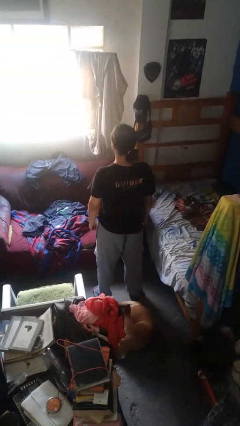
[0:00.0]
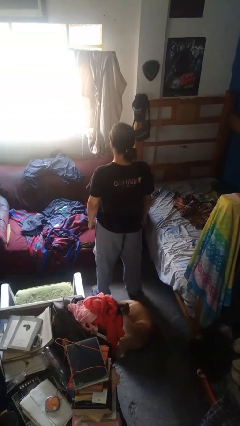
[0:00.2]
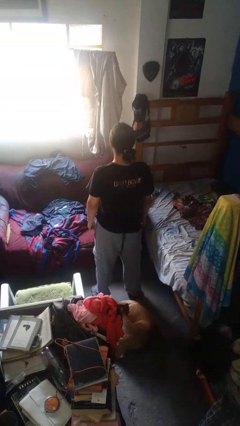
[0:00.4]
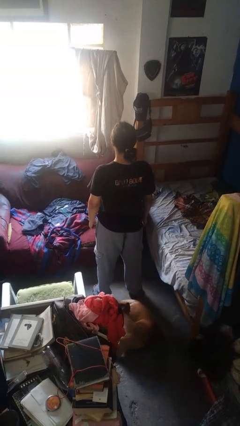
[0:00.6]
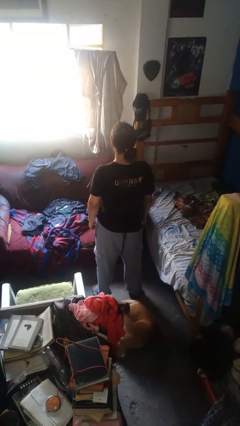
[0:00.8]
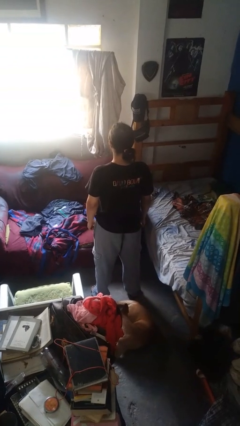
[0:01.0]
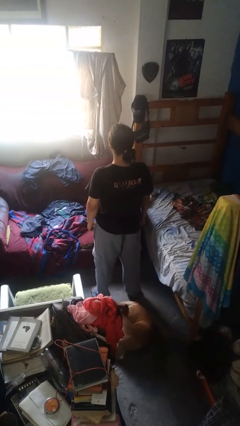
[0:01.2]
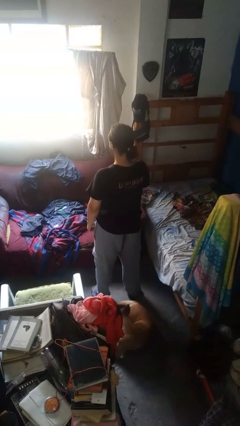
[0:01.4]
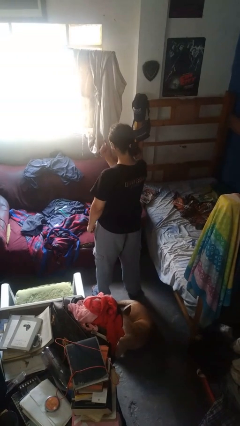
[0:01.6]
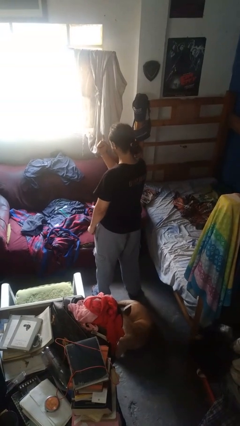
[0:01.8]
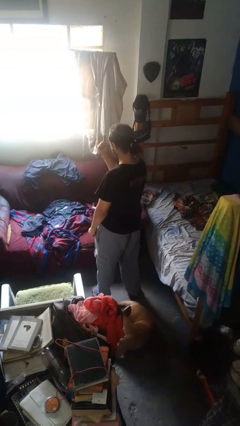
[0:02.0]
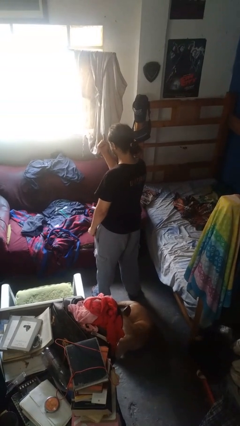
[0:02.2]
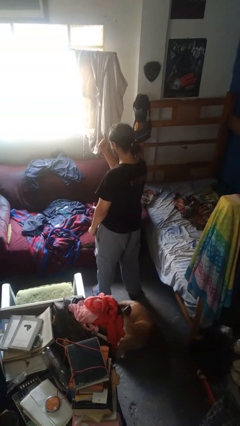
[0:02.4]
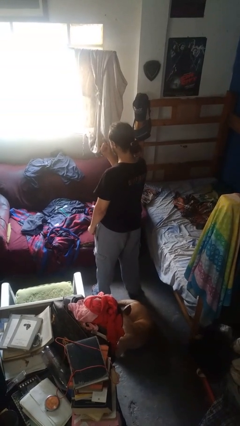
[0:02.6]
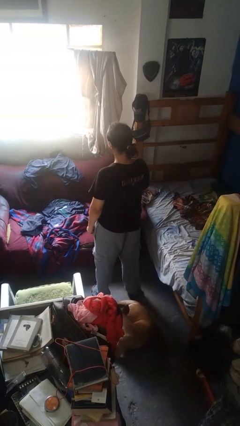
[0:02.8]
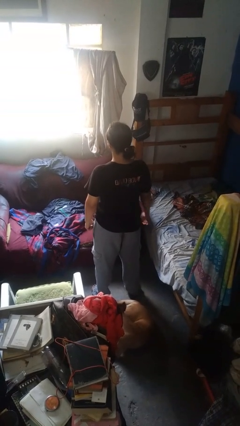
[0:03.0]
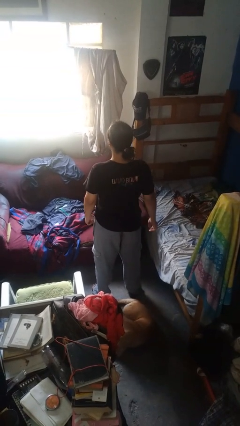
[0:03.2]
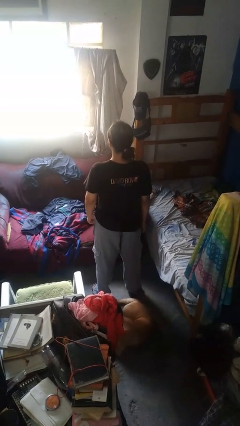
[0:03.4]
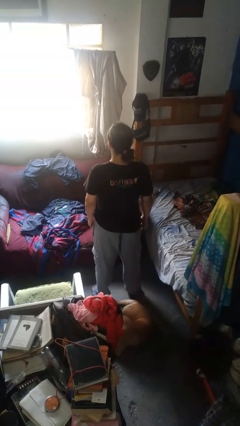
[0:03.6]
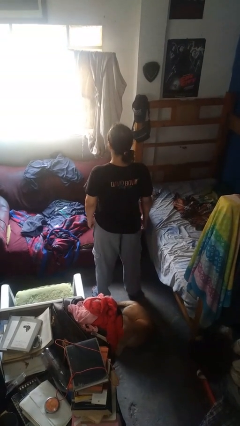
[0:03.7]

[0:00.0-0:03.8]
person gestures number one

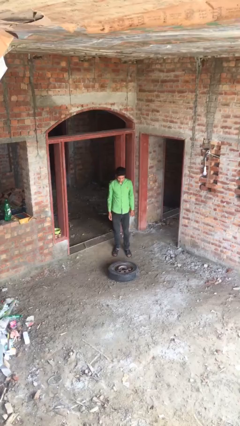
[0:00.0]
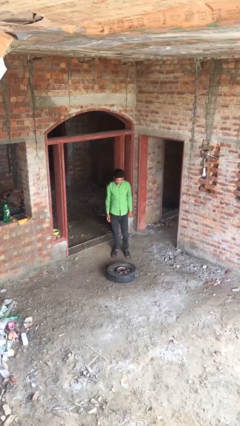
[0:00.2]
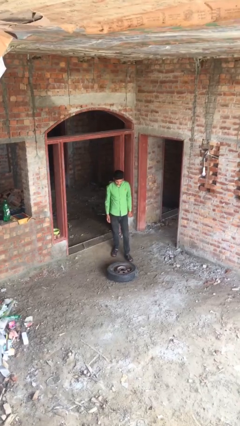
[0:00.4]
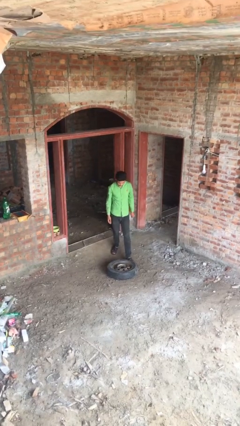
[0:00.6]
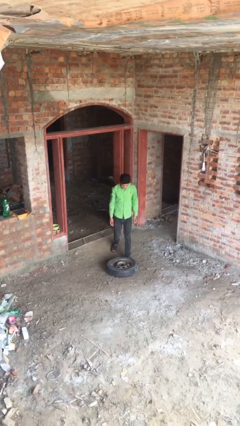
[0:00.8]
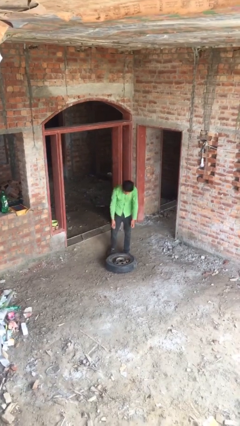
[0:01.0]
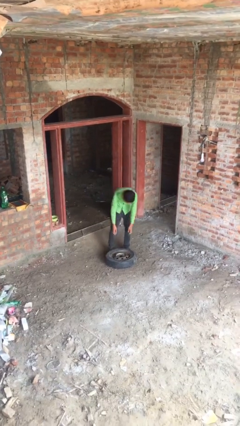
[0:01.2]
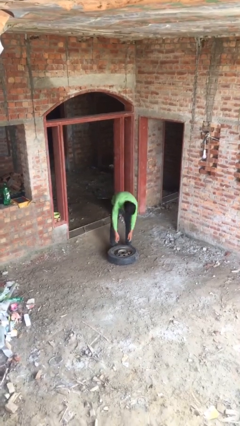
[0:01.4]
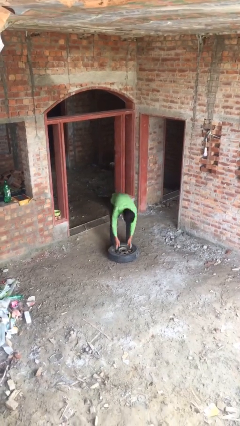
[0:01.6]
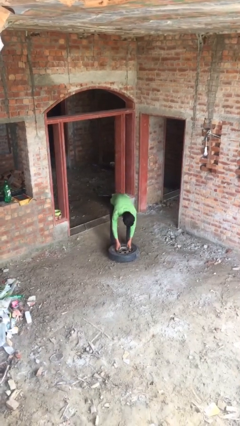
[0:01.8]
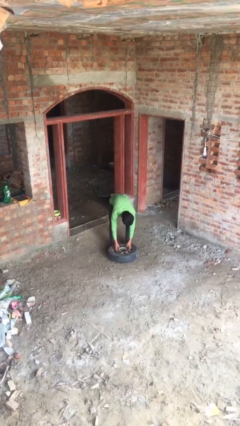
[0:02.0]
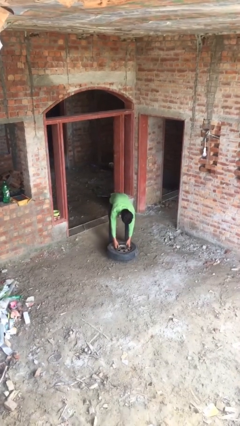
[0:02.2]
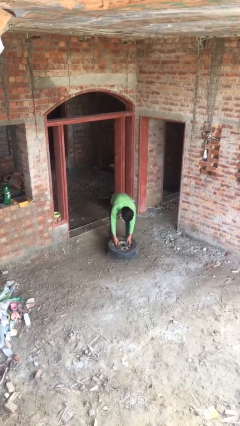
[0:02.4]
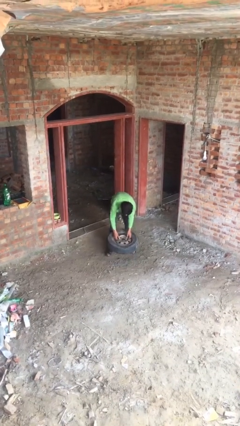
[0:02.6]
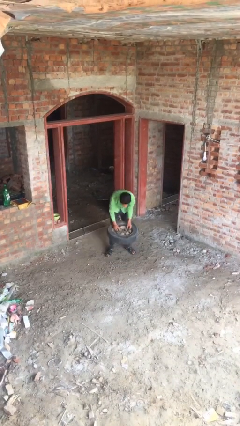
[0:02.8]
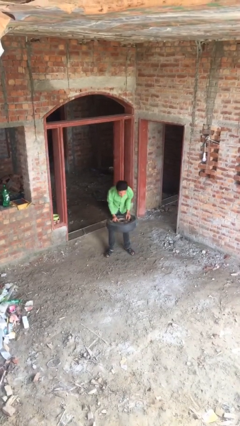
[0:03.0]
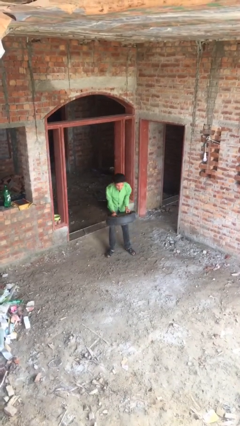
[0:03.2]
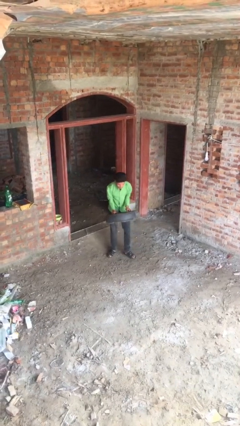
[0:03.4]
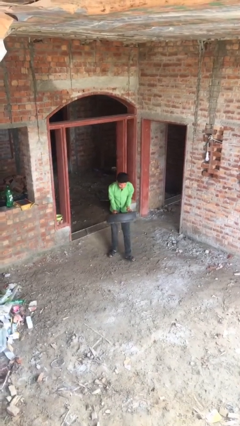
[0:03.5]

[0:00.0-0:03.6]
person picks up object from floor

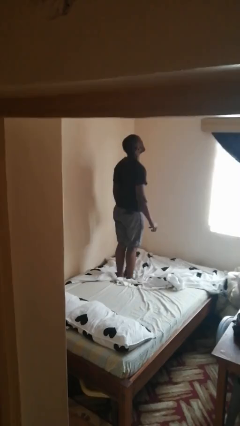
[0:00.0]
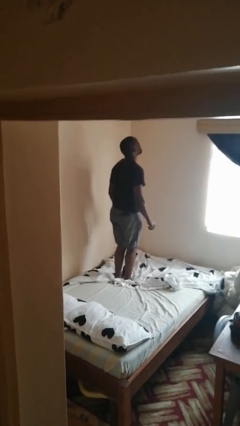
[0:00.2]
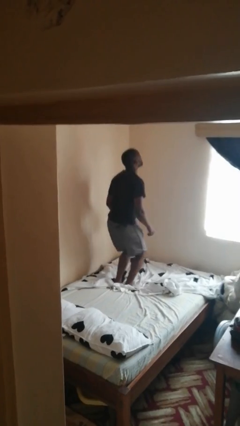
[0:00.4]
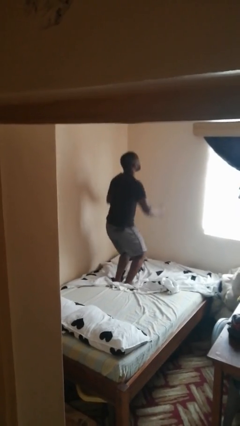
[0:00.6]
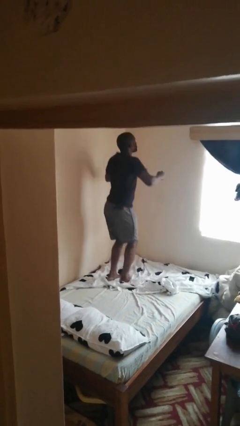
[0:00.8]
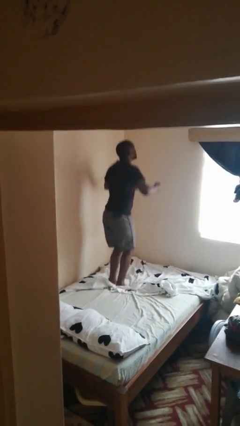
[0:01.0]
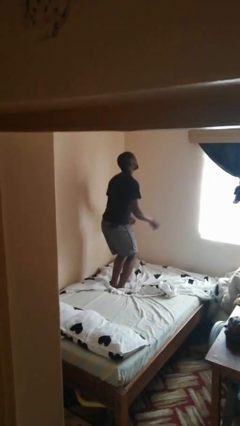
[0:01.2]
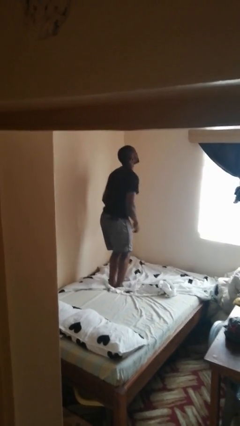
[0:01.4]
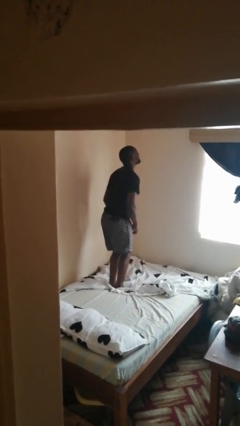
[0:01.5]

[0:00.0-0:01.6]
person jumps on bed

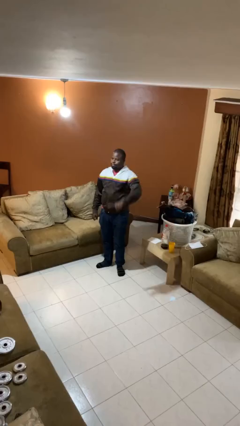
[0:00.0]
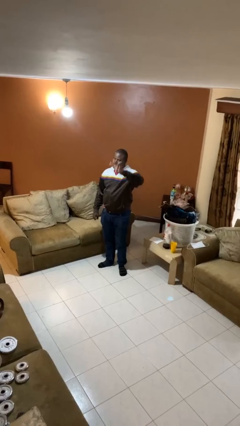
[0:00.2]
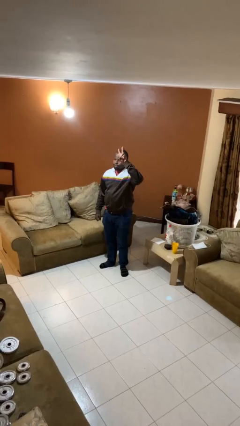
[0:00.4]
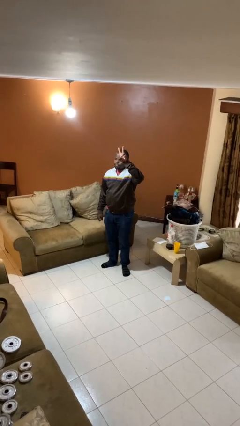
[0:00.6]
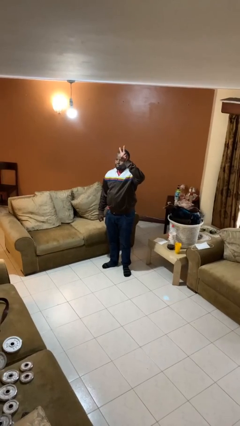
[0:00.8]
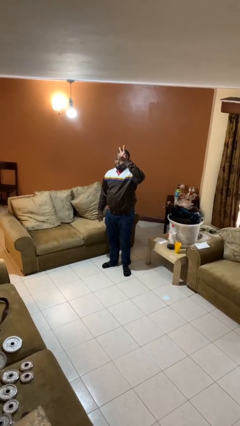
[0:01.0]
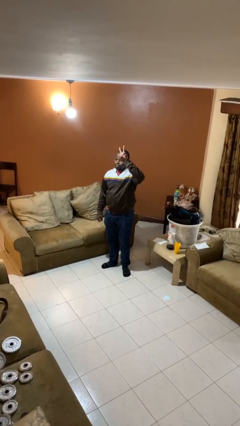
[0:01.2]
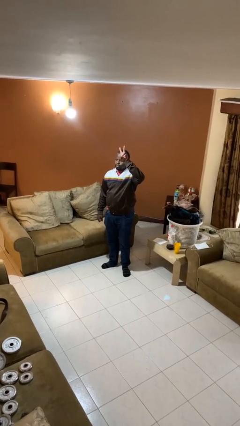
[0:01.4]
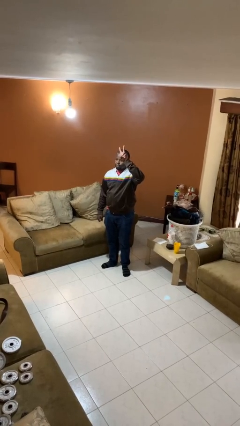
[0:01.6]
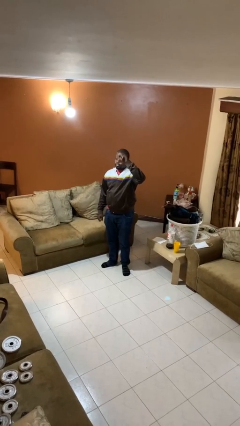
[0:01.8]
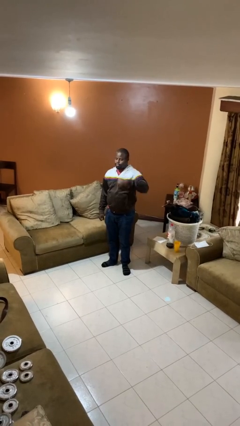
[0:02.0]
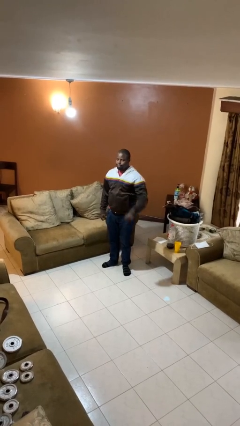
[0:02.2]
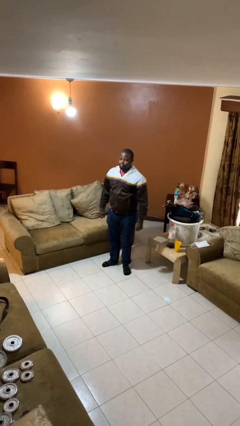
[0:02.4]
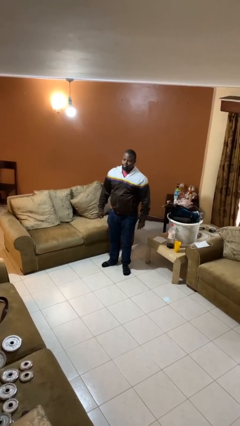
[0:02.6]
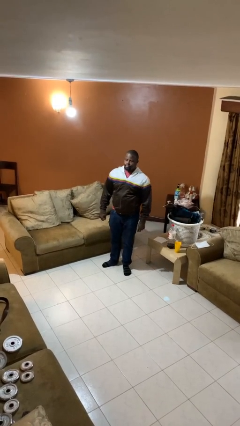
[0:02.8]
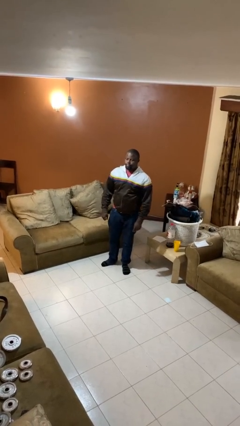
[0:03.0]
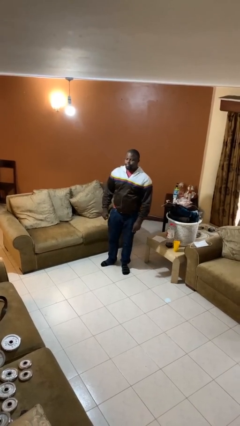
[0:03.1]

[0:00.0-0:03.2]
person gestures peace

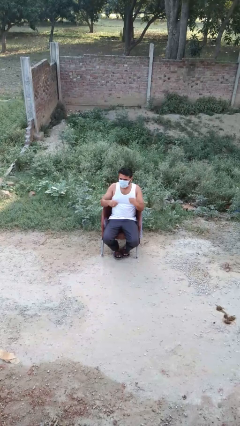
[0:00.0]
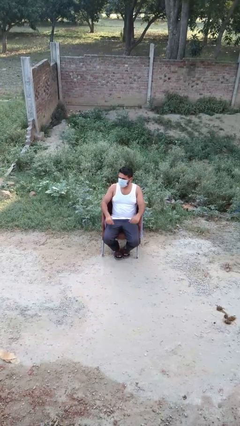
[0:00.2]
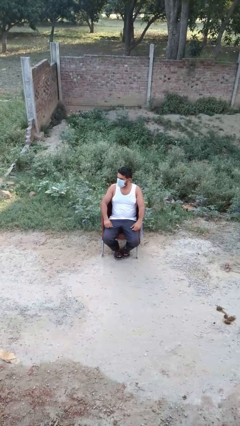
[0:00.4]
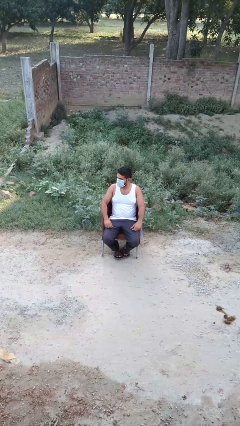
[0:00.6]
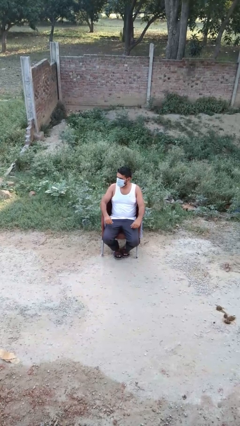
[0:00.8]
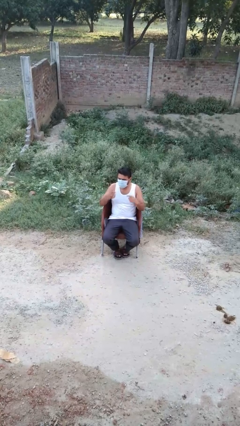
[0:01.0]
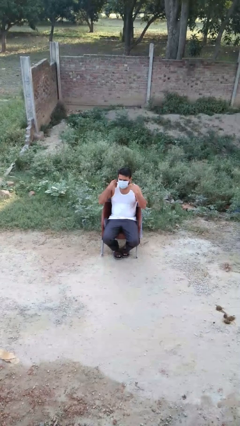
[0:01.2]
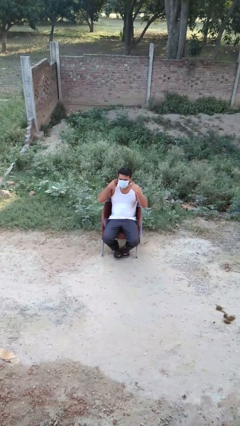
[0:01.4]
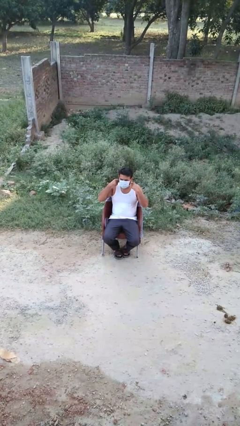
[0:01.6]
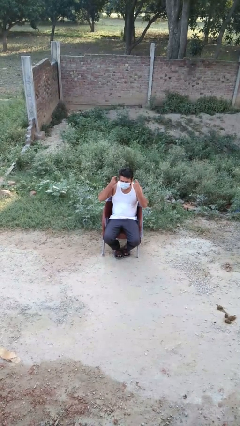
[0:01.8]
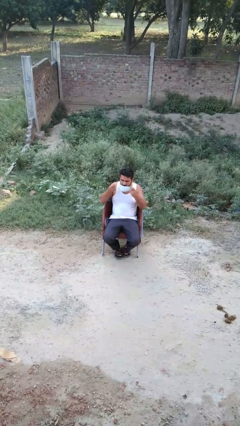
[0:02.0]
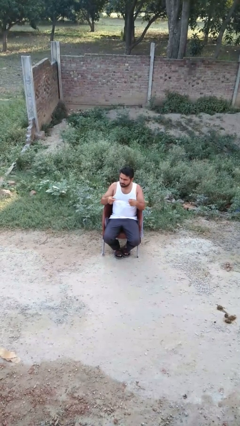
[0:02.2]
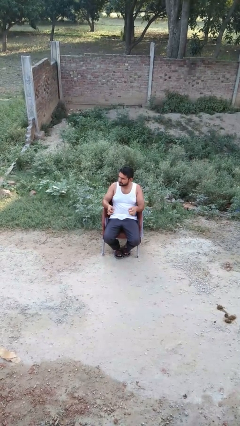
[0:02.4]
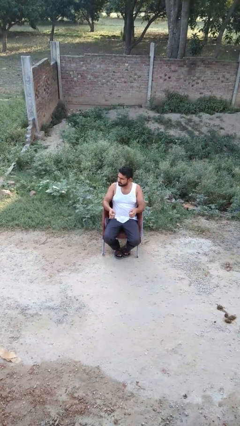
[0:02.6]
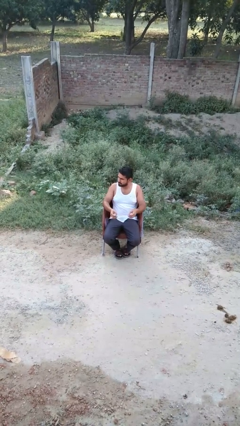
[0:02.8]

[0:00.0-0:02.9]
person takes off facemask

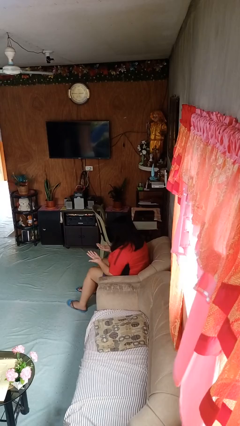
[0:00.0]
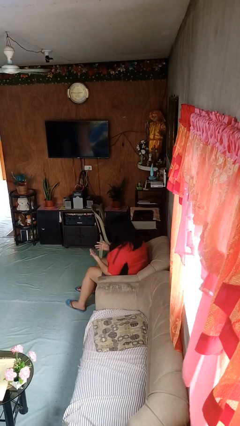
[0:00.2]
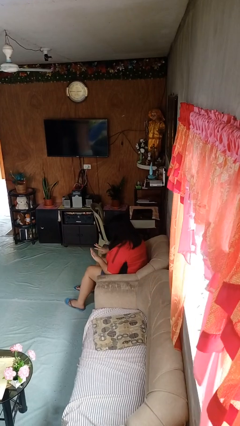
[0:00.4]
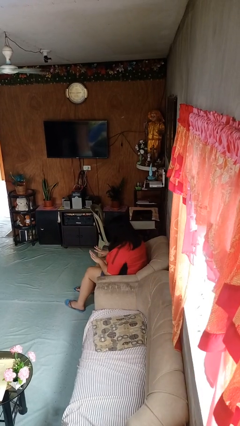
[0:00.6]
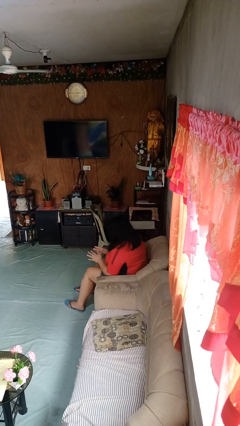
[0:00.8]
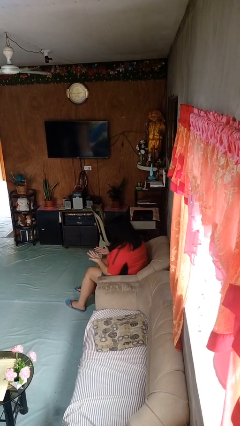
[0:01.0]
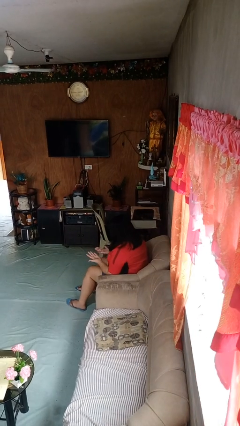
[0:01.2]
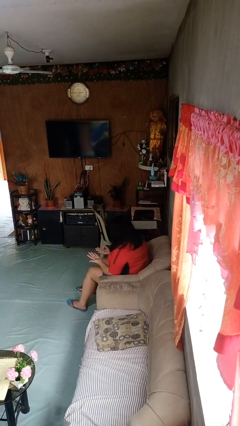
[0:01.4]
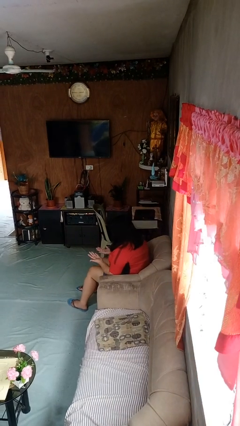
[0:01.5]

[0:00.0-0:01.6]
person looks at hands in lap

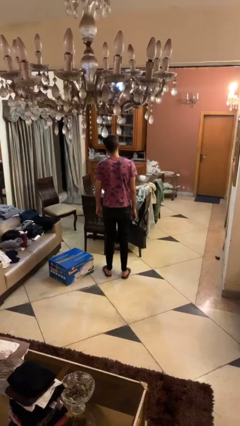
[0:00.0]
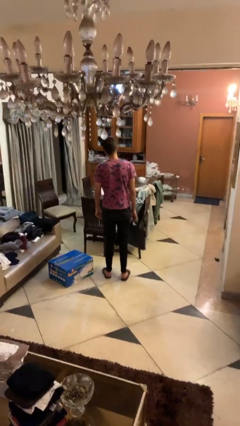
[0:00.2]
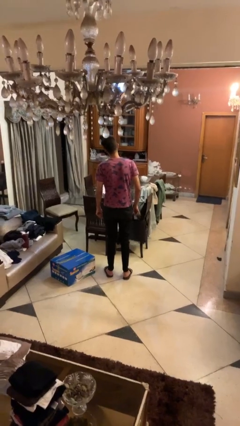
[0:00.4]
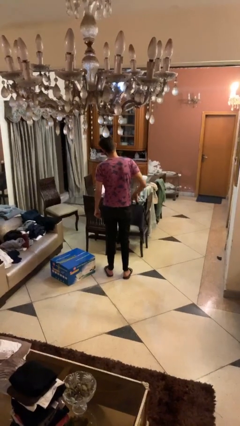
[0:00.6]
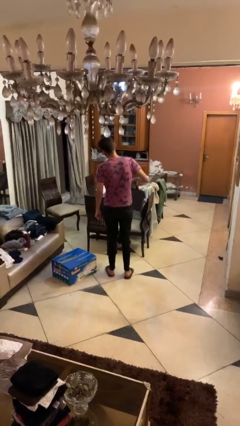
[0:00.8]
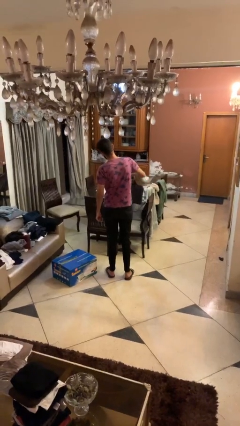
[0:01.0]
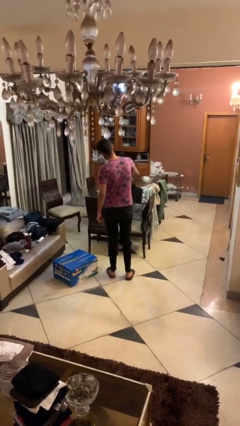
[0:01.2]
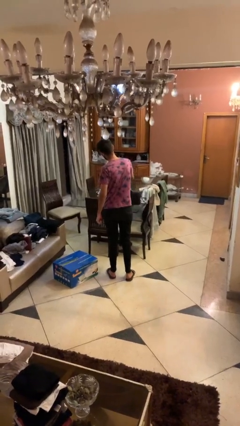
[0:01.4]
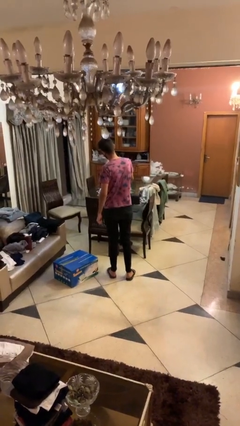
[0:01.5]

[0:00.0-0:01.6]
person puts down object on table
